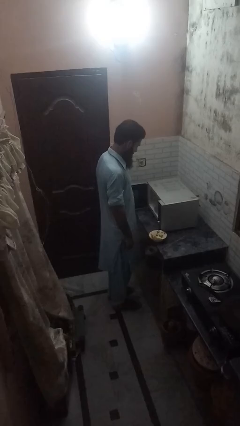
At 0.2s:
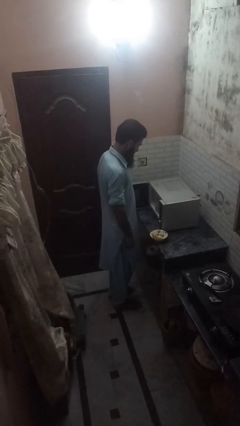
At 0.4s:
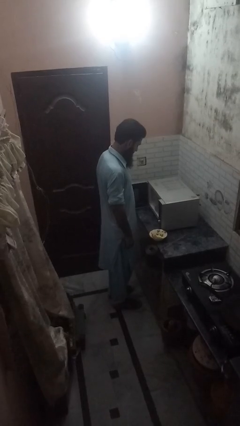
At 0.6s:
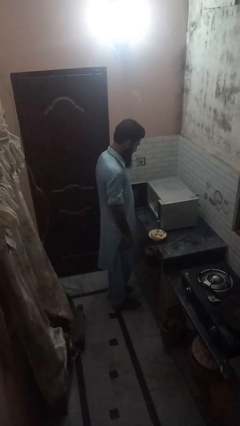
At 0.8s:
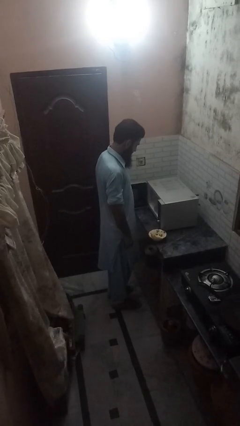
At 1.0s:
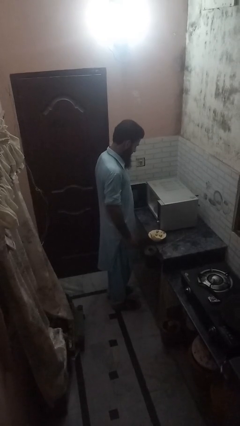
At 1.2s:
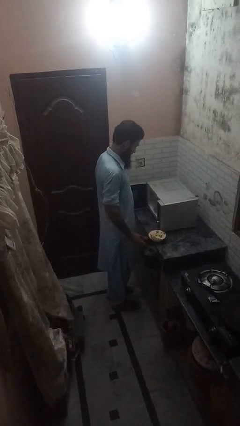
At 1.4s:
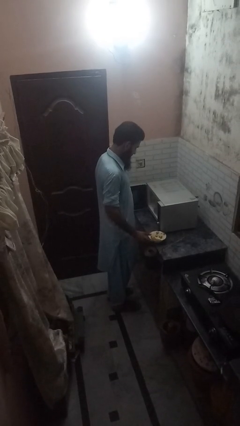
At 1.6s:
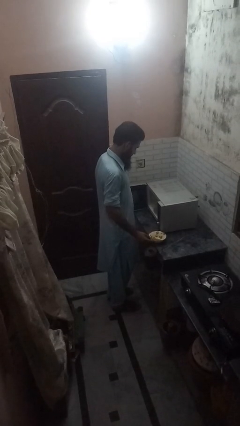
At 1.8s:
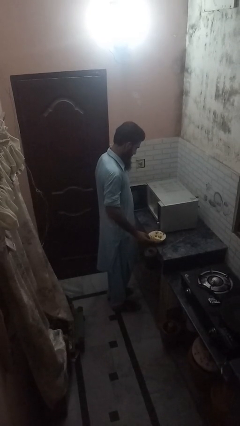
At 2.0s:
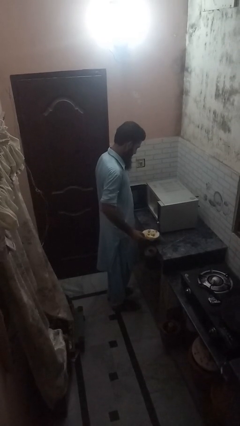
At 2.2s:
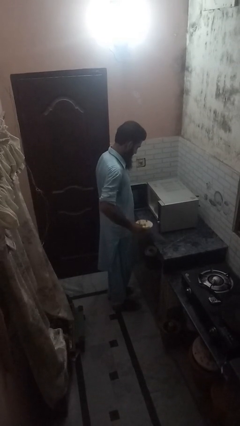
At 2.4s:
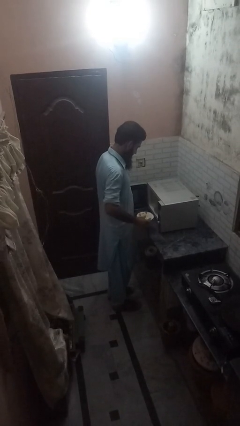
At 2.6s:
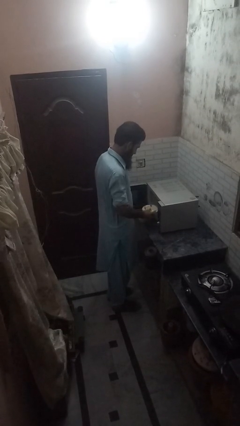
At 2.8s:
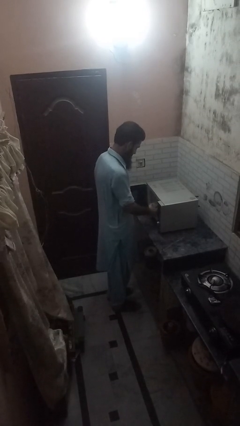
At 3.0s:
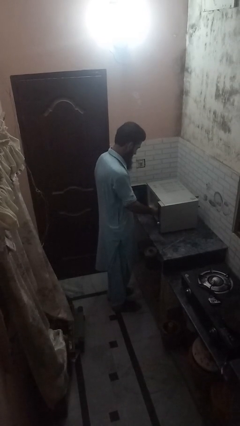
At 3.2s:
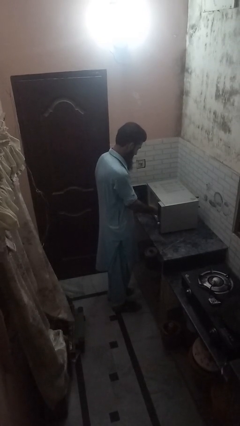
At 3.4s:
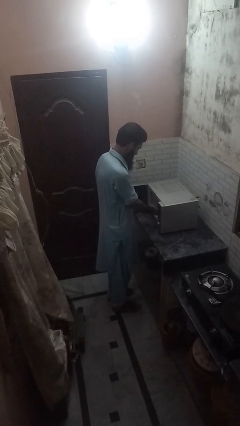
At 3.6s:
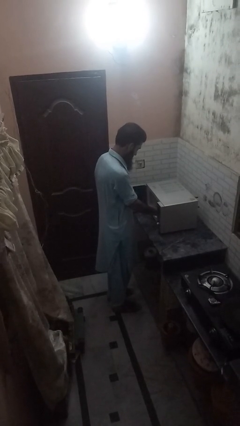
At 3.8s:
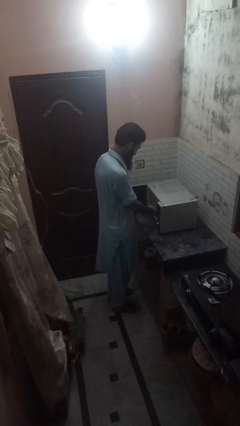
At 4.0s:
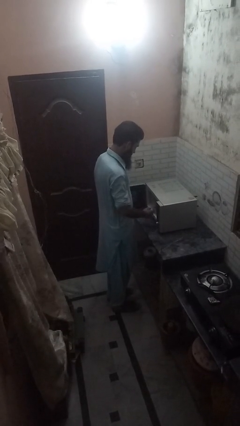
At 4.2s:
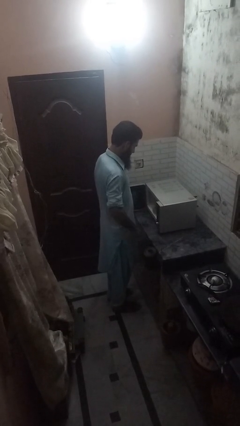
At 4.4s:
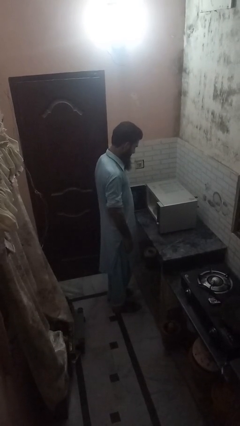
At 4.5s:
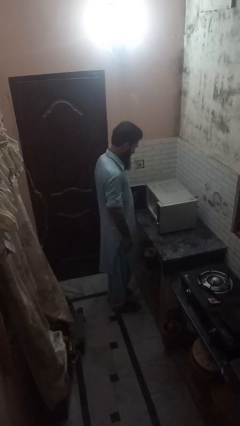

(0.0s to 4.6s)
person puts object into microwave

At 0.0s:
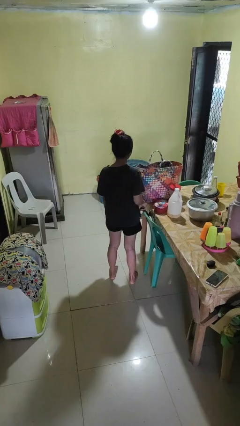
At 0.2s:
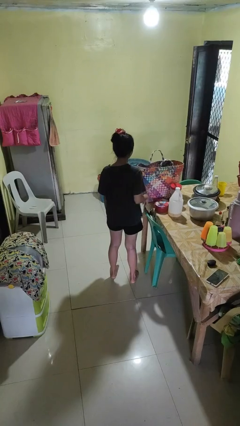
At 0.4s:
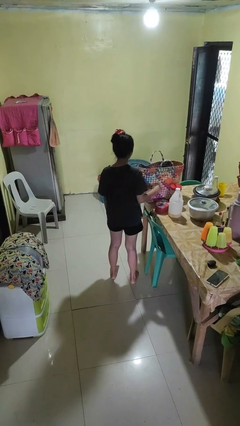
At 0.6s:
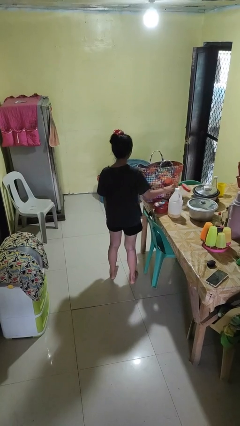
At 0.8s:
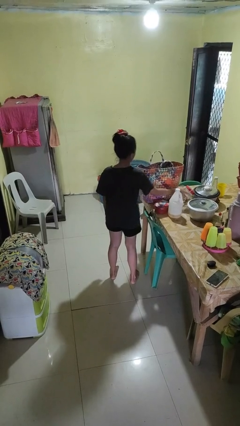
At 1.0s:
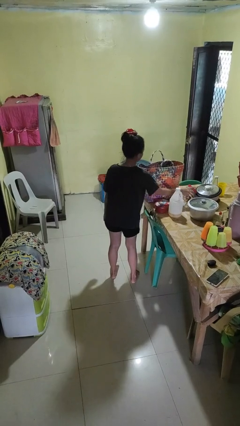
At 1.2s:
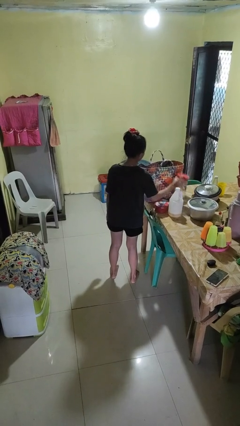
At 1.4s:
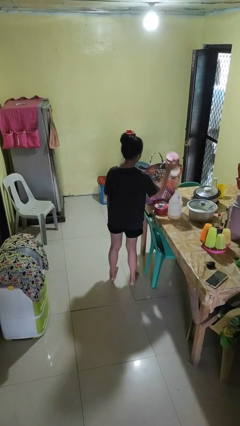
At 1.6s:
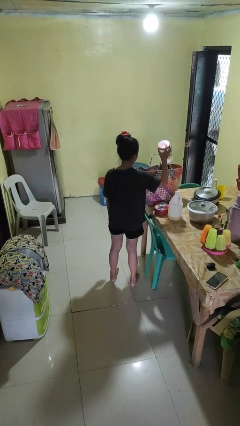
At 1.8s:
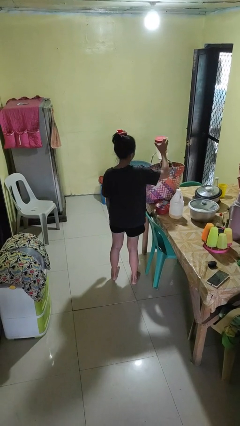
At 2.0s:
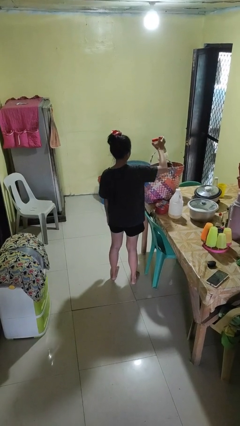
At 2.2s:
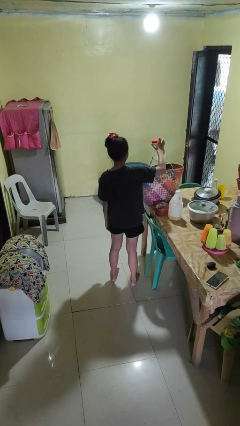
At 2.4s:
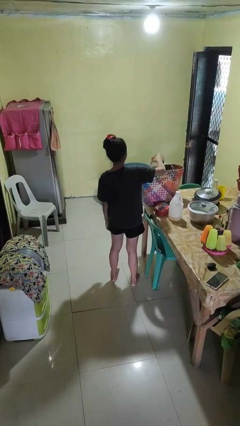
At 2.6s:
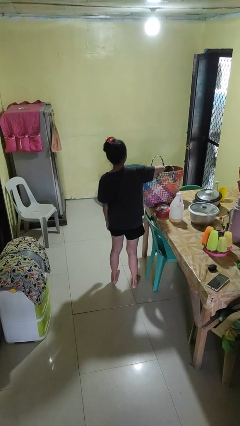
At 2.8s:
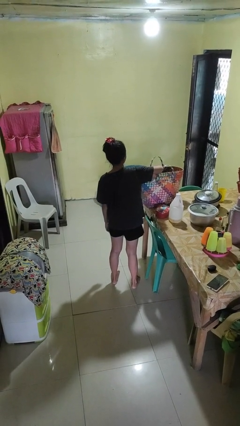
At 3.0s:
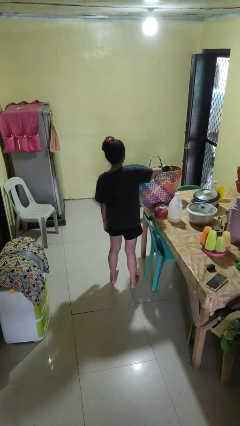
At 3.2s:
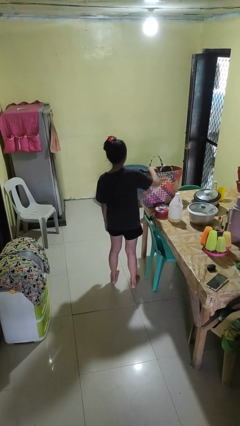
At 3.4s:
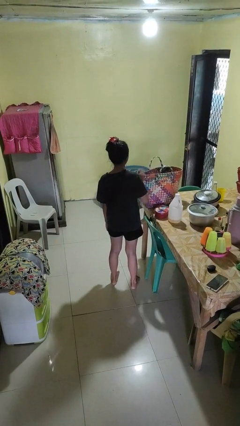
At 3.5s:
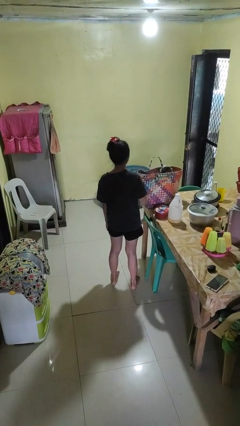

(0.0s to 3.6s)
person puts object into basket

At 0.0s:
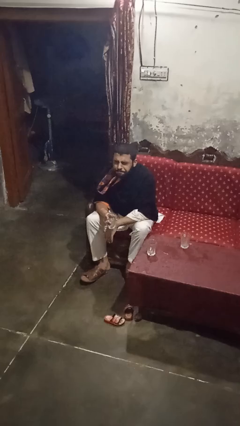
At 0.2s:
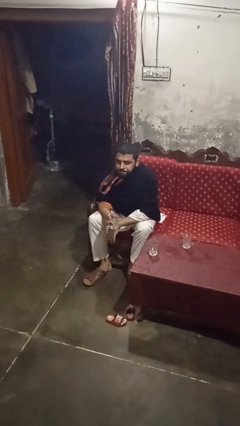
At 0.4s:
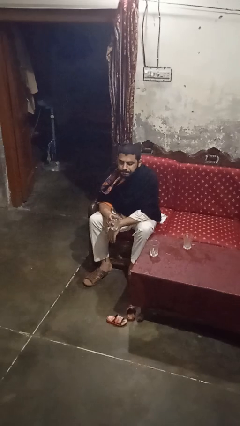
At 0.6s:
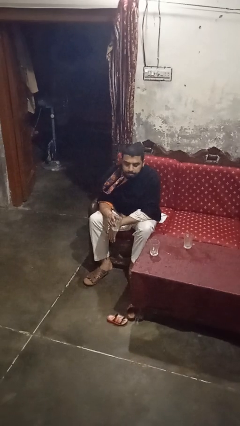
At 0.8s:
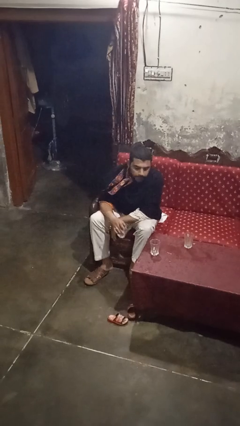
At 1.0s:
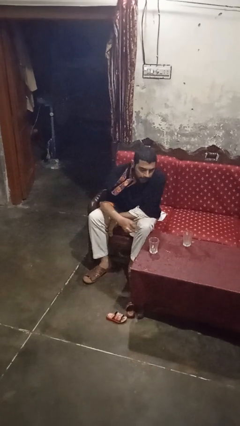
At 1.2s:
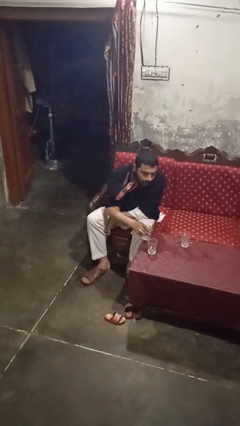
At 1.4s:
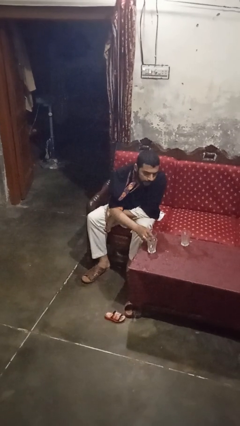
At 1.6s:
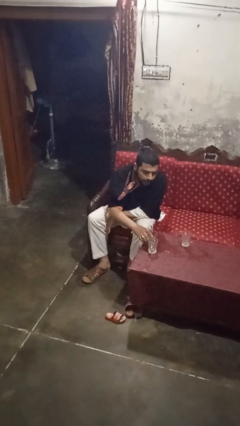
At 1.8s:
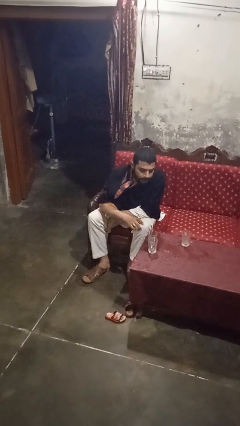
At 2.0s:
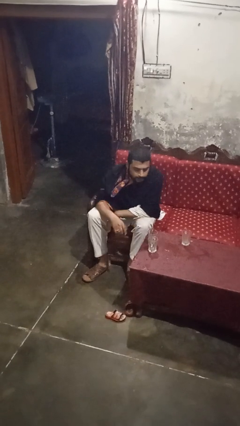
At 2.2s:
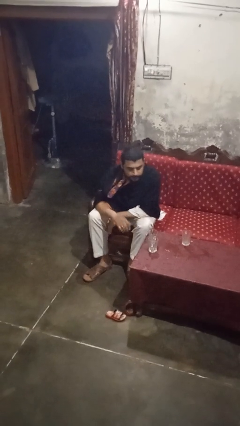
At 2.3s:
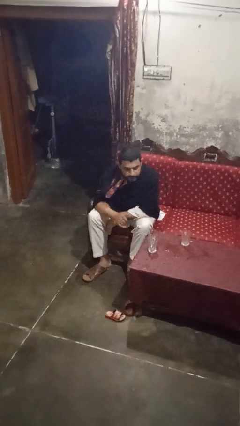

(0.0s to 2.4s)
person puts down object on table

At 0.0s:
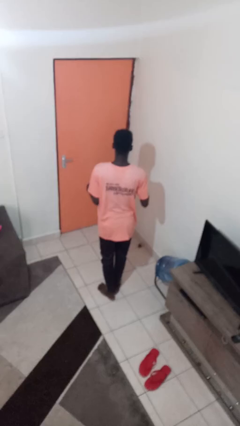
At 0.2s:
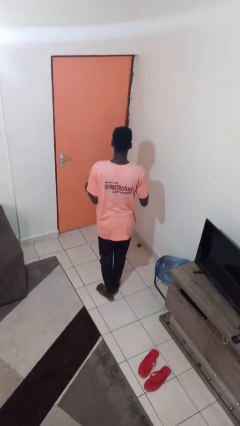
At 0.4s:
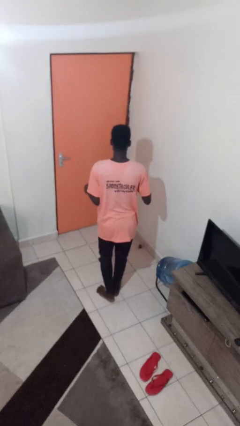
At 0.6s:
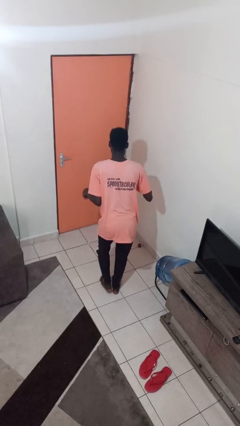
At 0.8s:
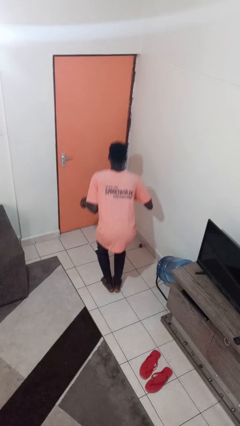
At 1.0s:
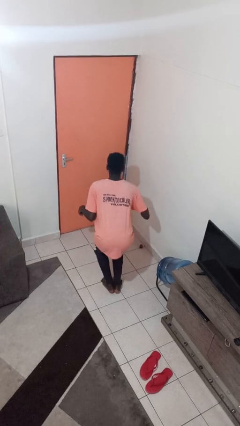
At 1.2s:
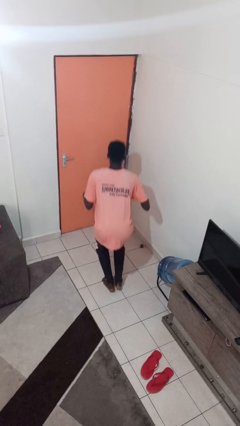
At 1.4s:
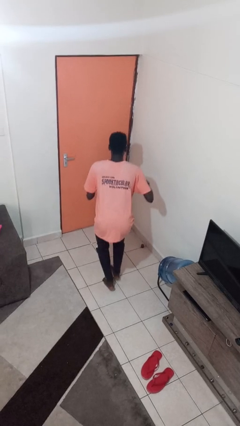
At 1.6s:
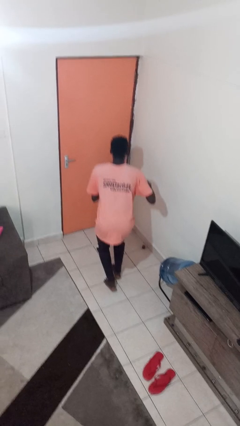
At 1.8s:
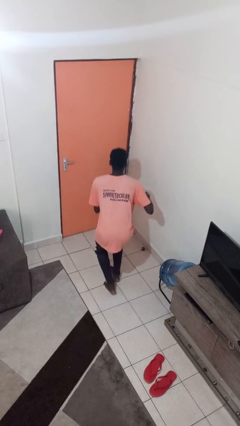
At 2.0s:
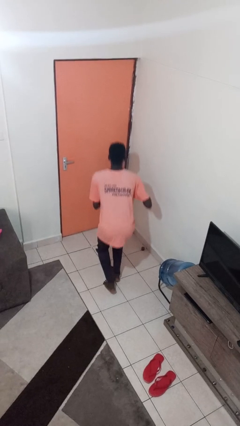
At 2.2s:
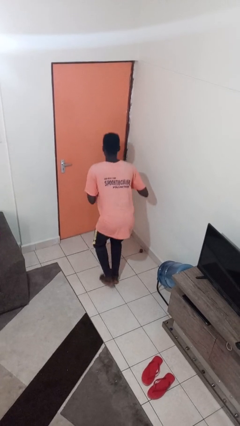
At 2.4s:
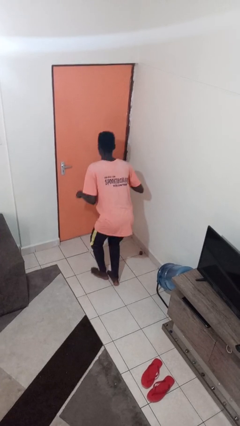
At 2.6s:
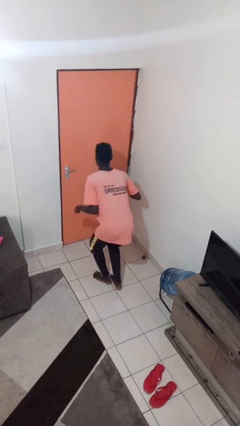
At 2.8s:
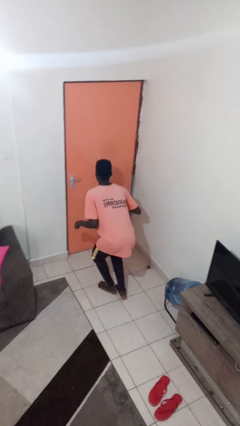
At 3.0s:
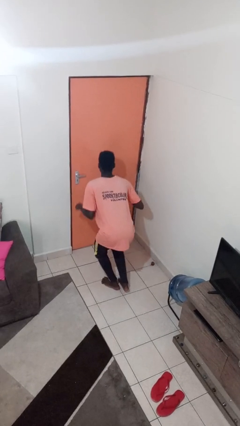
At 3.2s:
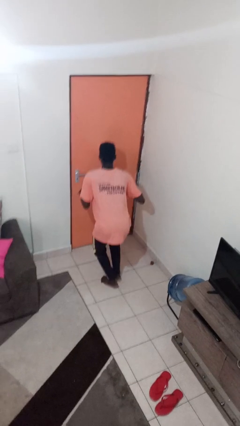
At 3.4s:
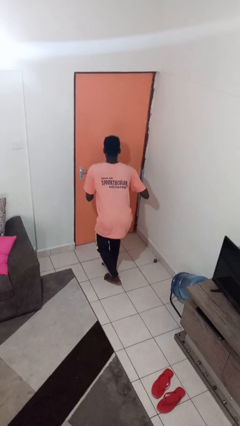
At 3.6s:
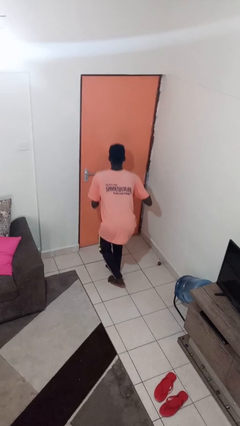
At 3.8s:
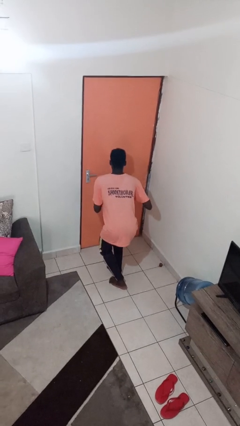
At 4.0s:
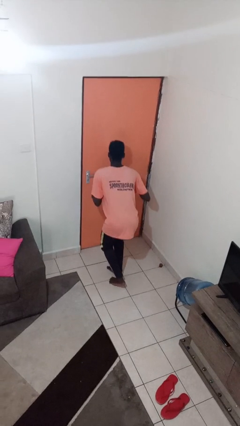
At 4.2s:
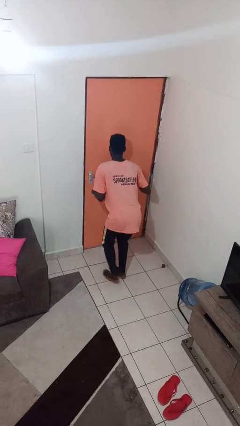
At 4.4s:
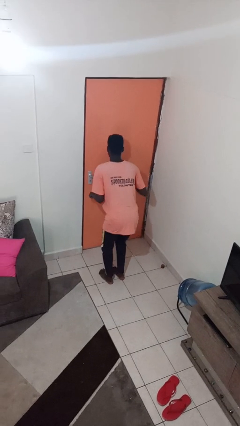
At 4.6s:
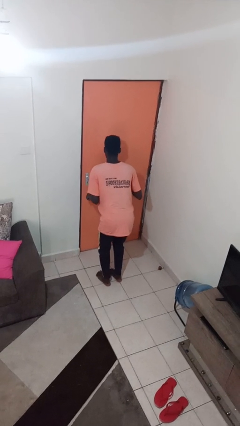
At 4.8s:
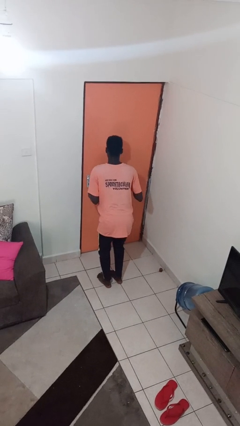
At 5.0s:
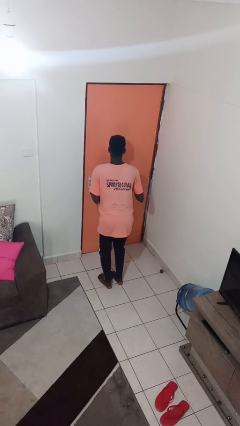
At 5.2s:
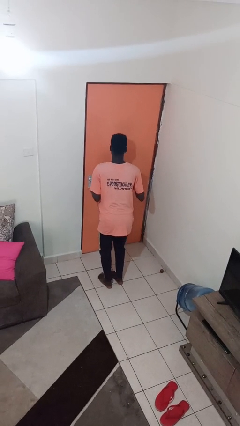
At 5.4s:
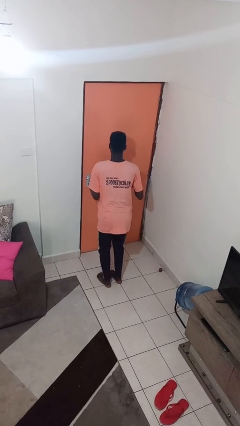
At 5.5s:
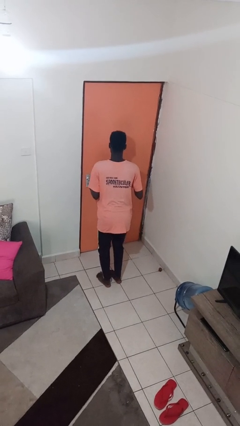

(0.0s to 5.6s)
person walks tiptoe

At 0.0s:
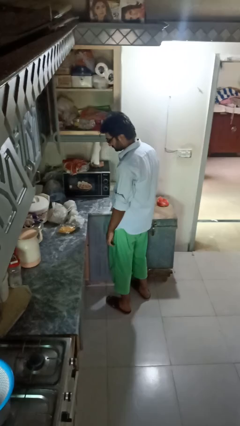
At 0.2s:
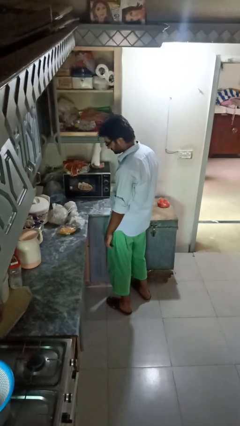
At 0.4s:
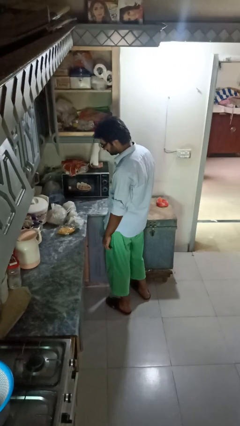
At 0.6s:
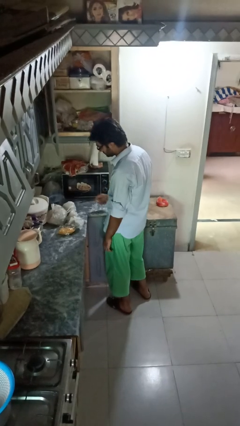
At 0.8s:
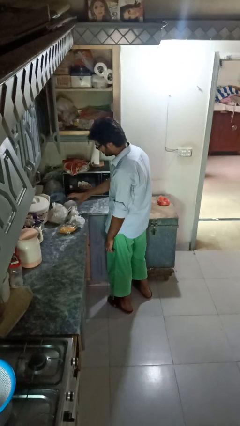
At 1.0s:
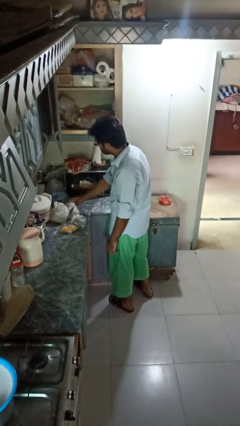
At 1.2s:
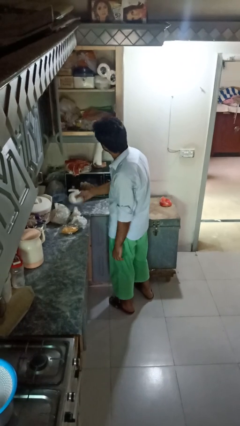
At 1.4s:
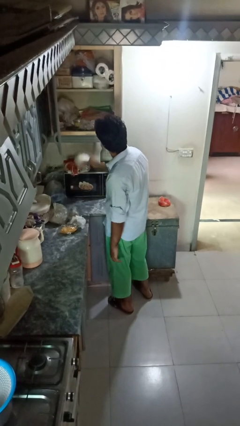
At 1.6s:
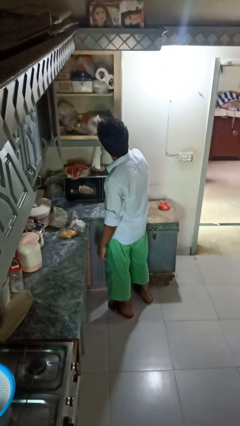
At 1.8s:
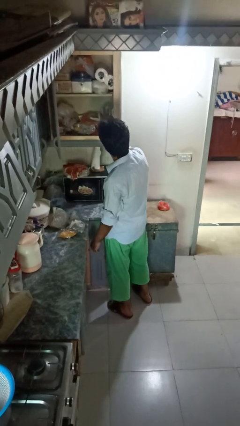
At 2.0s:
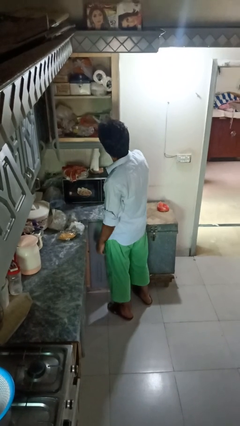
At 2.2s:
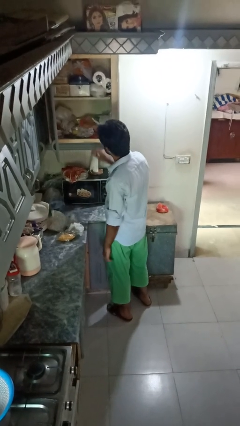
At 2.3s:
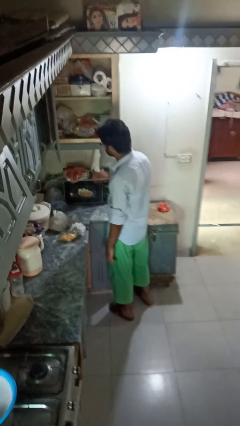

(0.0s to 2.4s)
person loads groceries into cabinet
